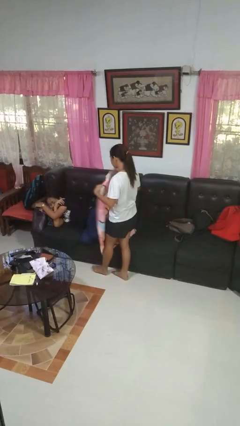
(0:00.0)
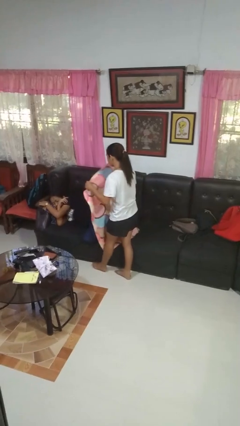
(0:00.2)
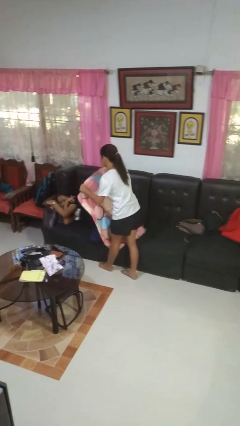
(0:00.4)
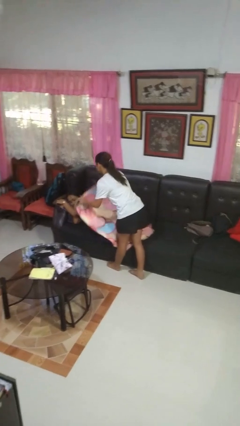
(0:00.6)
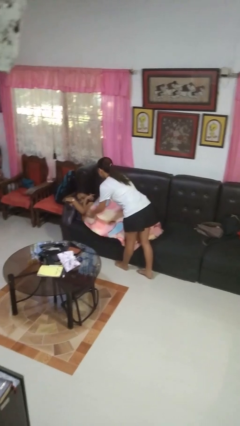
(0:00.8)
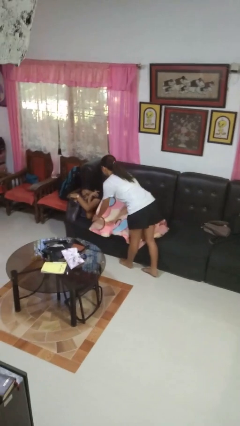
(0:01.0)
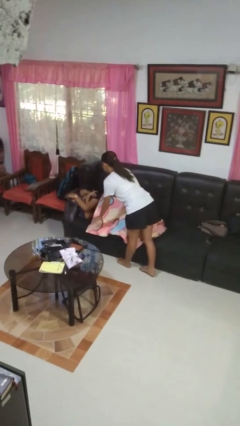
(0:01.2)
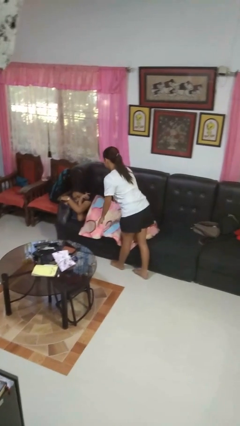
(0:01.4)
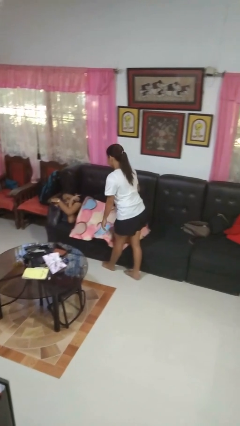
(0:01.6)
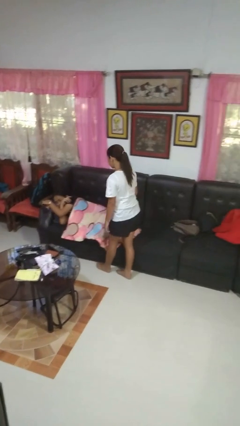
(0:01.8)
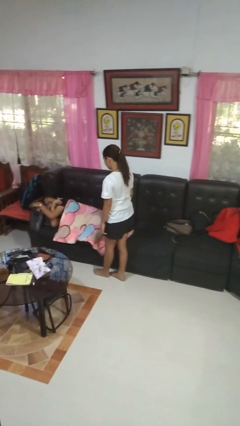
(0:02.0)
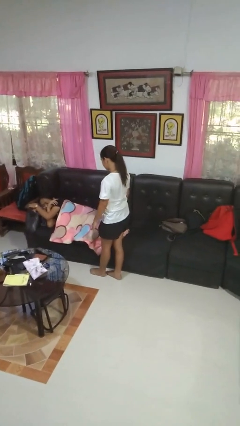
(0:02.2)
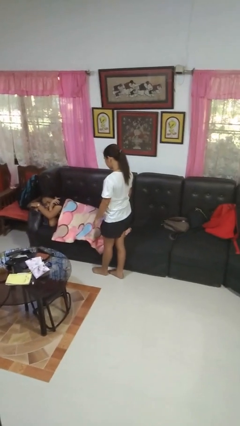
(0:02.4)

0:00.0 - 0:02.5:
person covers friend with blanket

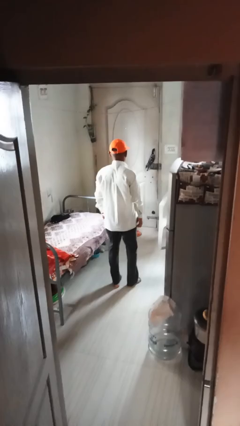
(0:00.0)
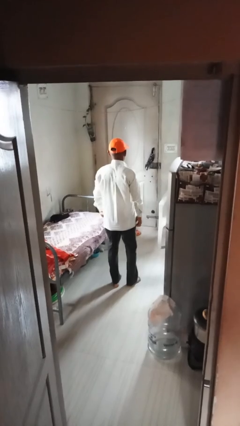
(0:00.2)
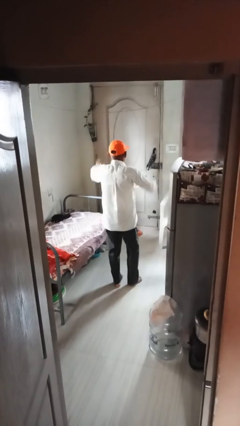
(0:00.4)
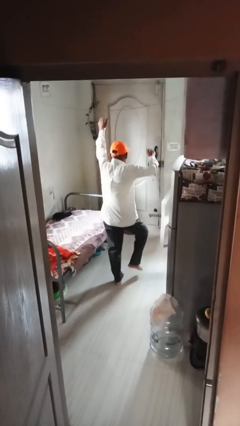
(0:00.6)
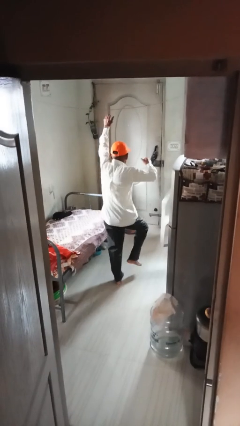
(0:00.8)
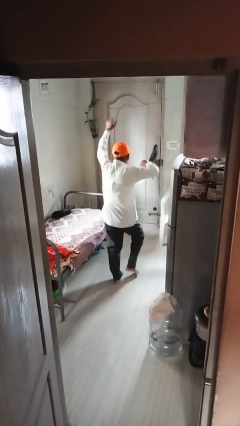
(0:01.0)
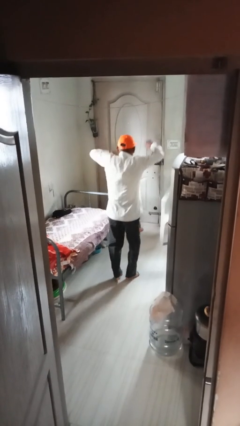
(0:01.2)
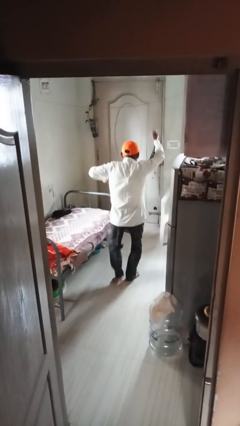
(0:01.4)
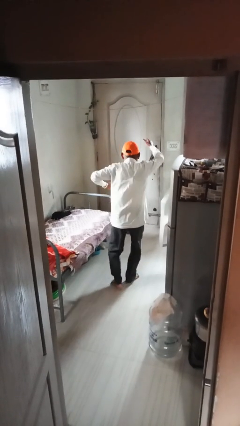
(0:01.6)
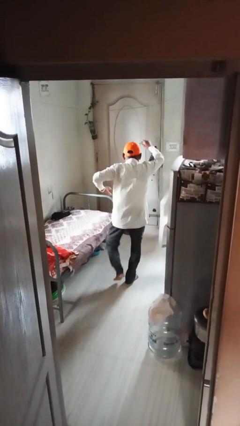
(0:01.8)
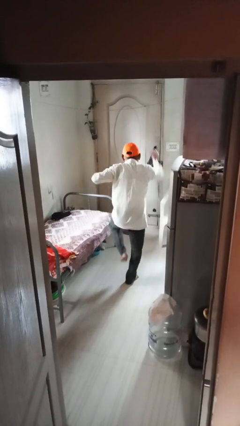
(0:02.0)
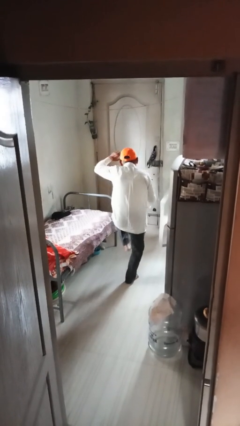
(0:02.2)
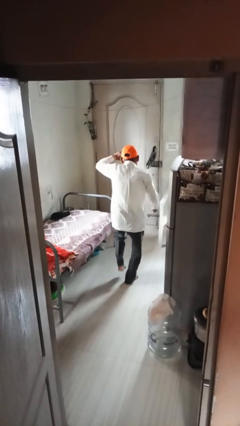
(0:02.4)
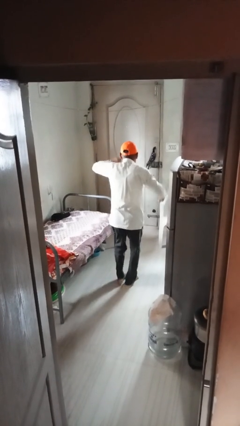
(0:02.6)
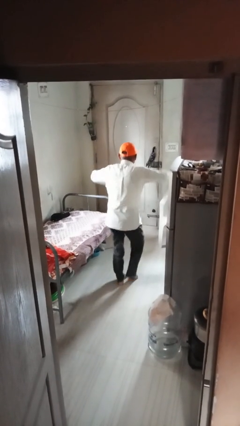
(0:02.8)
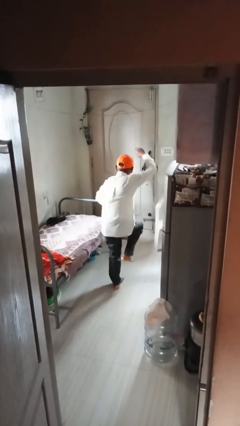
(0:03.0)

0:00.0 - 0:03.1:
person dances in place

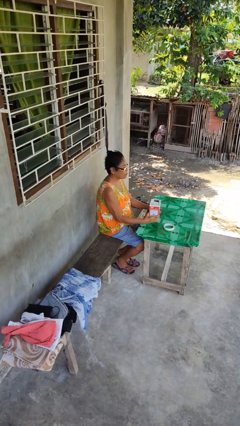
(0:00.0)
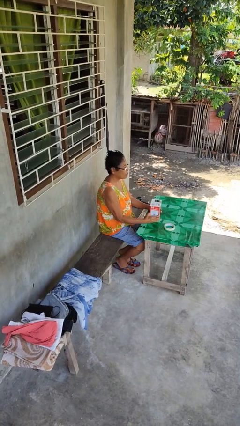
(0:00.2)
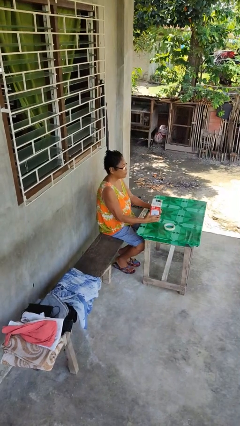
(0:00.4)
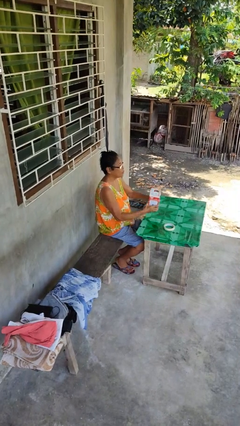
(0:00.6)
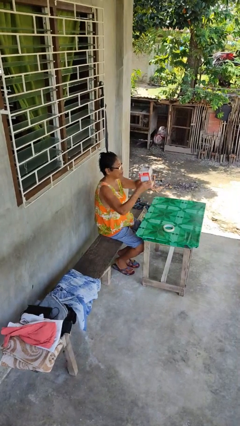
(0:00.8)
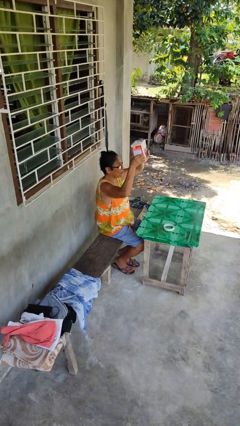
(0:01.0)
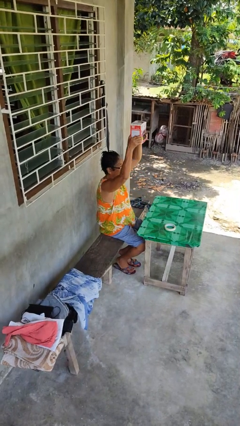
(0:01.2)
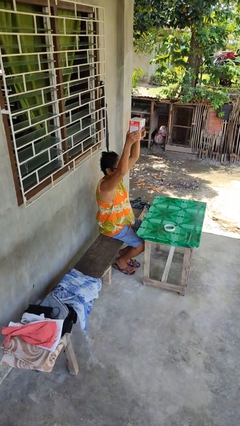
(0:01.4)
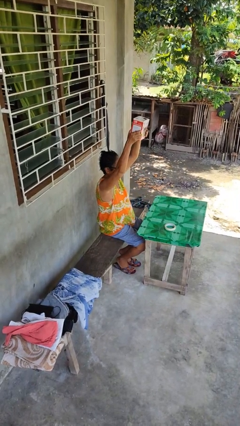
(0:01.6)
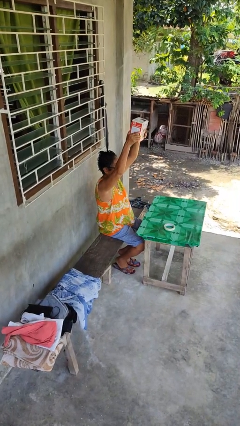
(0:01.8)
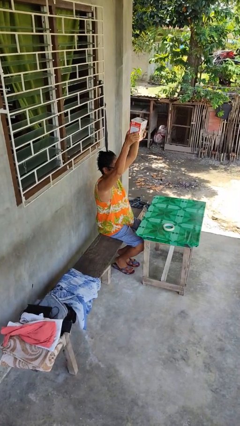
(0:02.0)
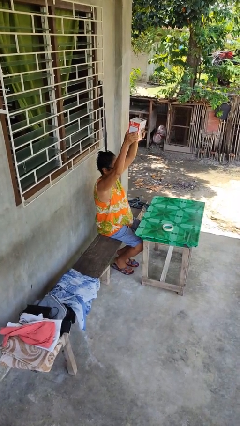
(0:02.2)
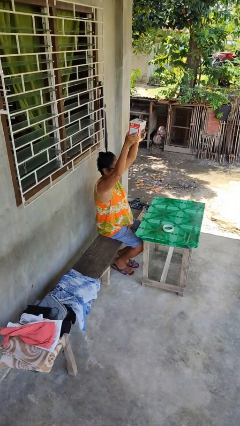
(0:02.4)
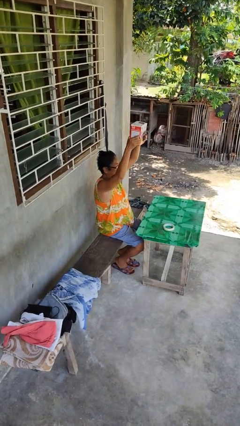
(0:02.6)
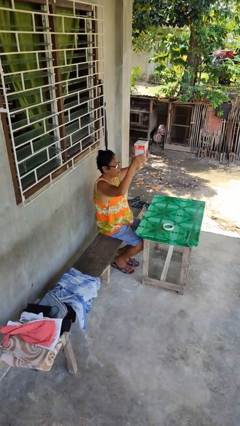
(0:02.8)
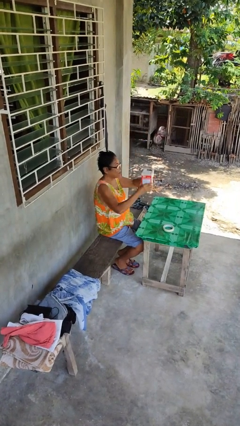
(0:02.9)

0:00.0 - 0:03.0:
person holds object above head

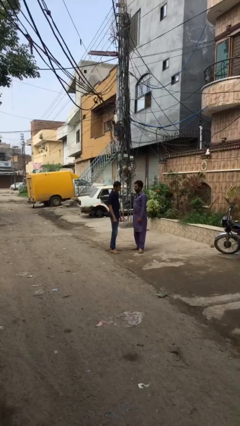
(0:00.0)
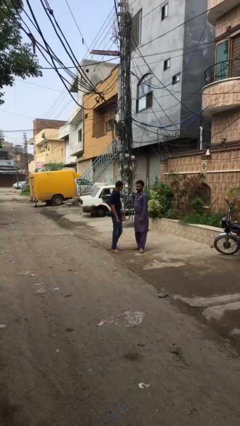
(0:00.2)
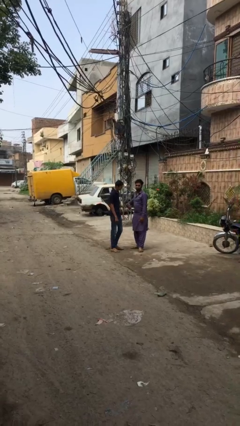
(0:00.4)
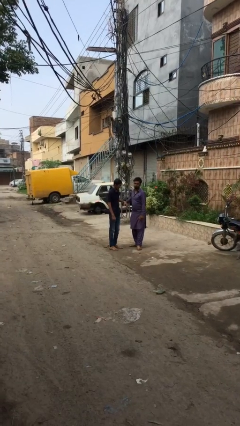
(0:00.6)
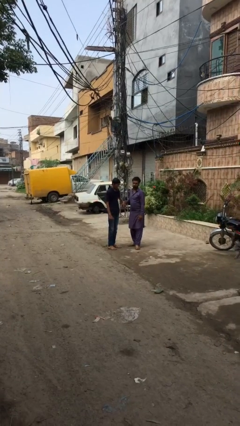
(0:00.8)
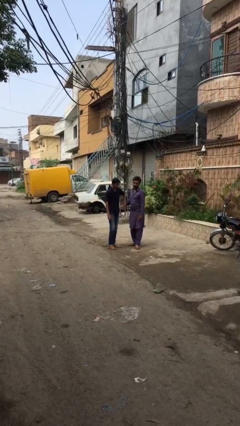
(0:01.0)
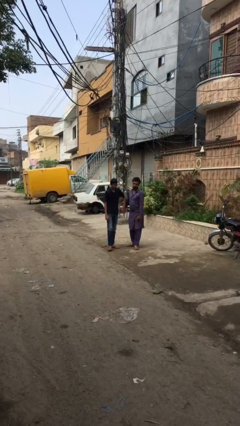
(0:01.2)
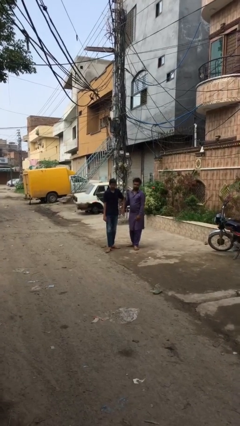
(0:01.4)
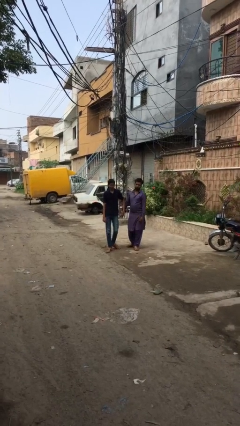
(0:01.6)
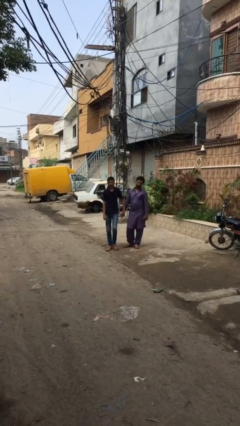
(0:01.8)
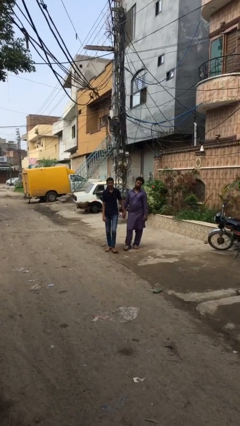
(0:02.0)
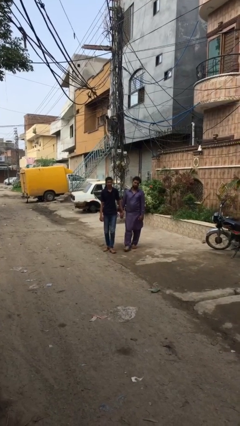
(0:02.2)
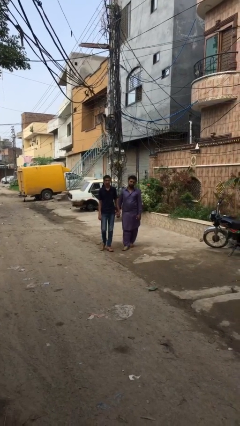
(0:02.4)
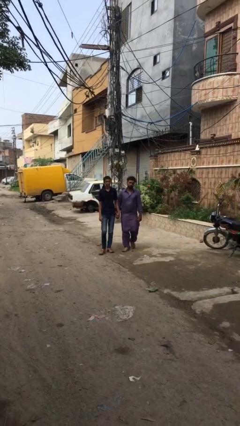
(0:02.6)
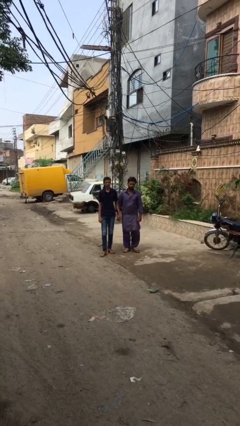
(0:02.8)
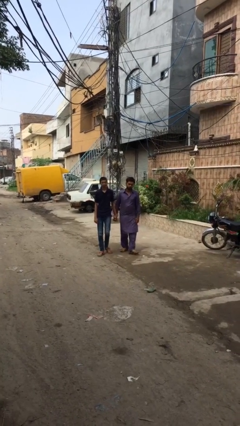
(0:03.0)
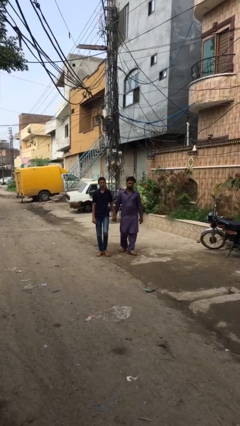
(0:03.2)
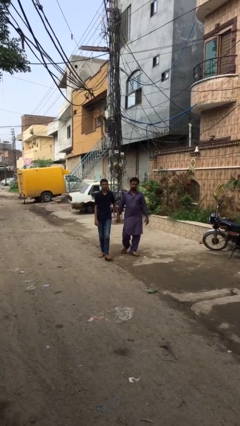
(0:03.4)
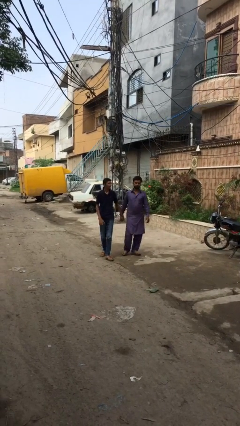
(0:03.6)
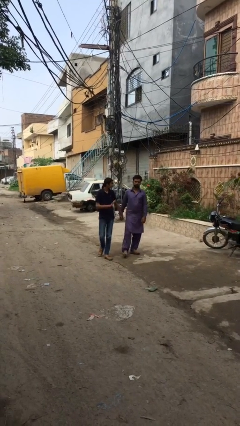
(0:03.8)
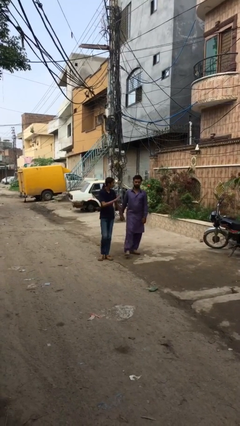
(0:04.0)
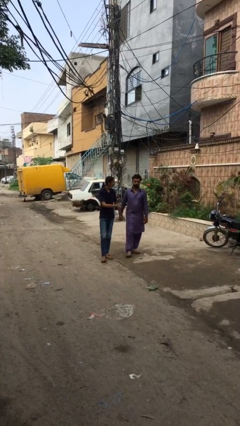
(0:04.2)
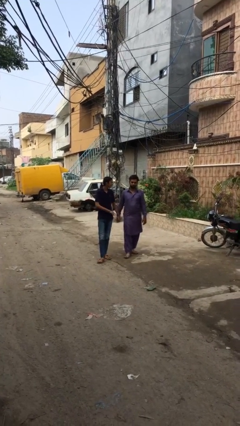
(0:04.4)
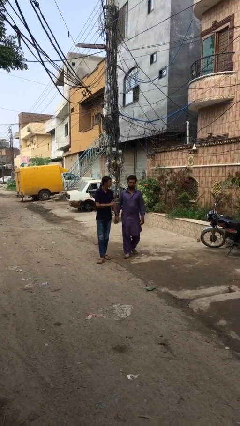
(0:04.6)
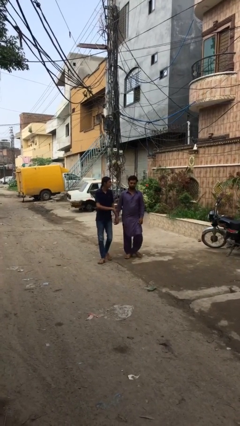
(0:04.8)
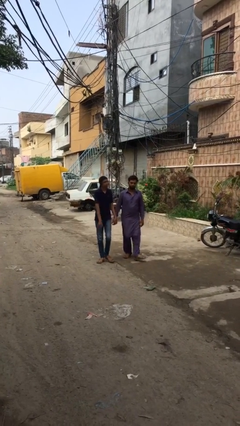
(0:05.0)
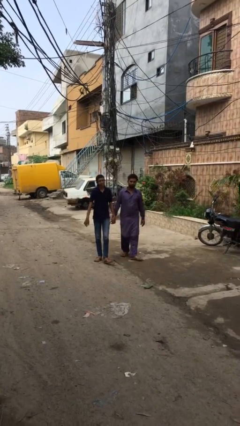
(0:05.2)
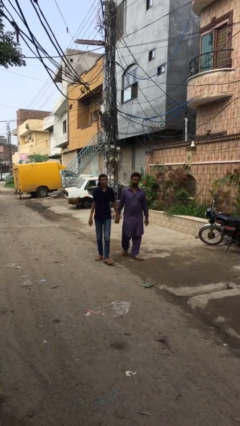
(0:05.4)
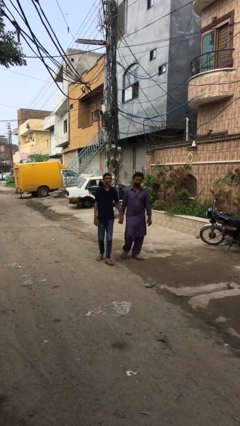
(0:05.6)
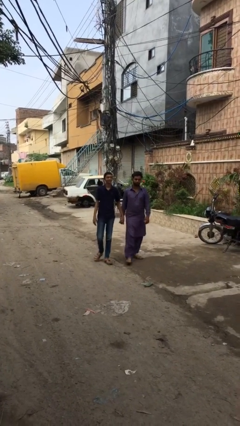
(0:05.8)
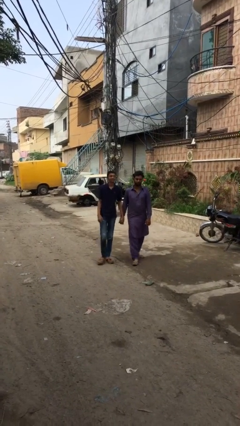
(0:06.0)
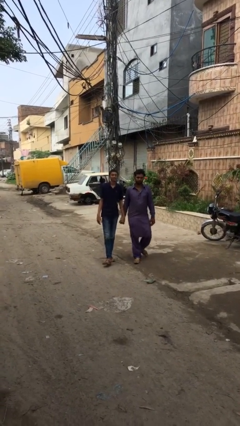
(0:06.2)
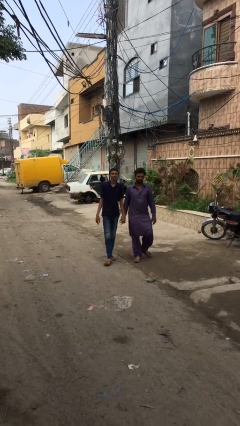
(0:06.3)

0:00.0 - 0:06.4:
person holds hand

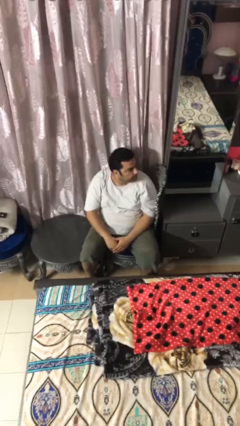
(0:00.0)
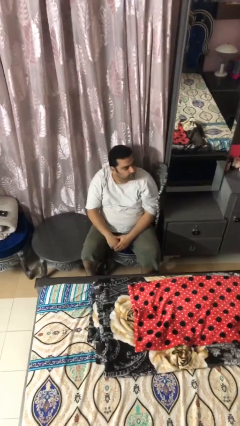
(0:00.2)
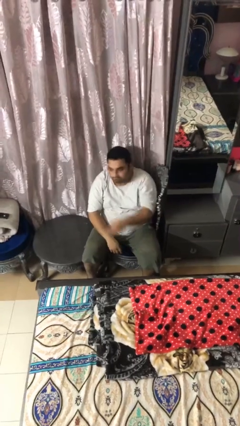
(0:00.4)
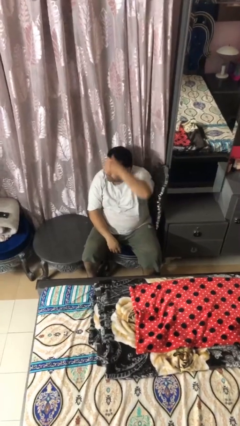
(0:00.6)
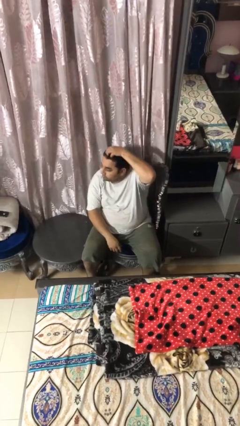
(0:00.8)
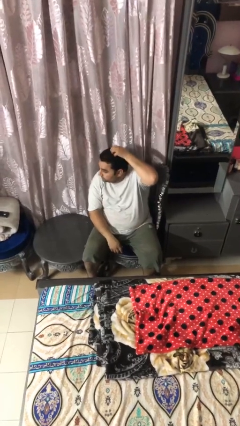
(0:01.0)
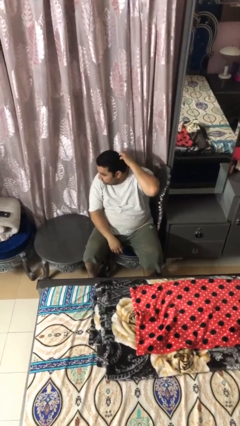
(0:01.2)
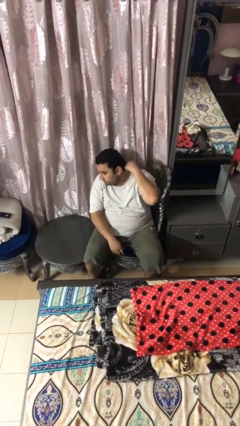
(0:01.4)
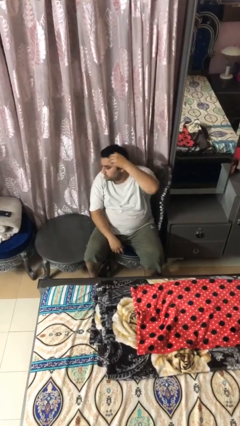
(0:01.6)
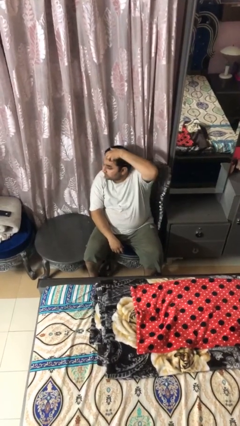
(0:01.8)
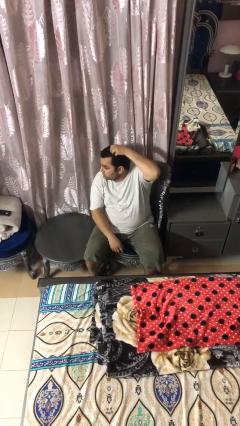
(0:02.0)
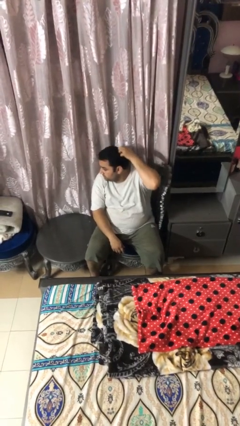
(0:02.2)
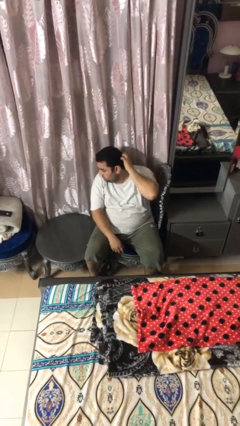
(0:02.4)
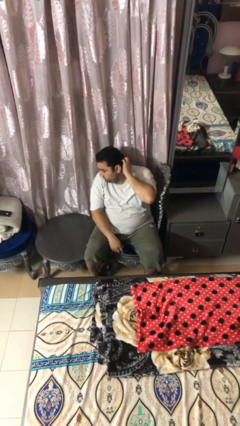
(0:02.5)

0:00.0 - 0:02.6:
person strokes hair

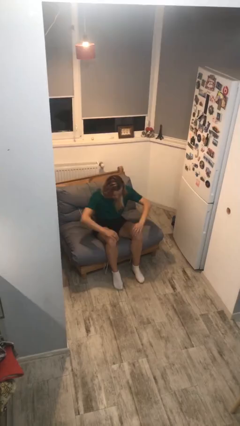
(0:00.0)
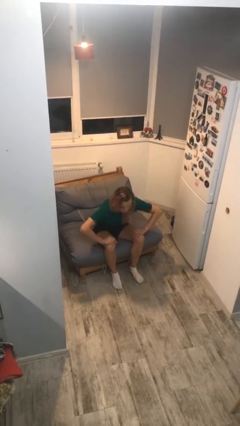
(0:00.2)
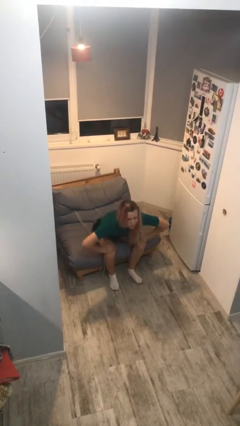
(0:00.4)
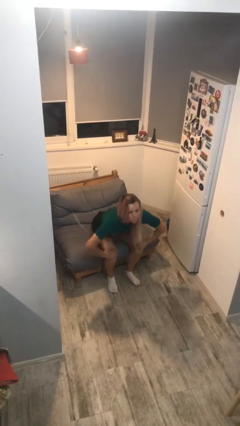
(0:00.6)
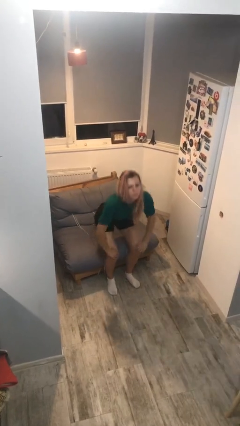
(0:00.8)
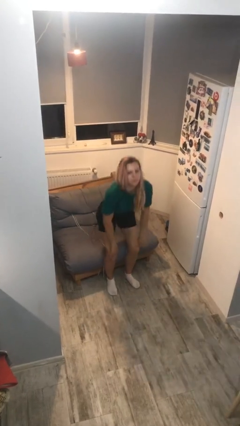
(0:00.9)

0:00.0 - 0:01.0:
person stands up
